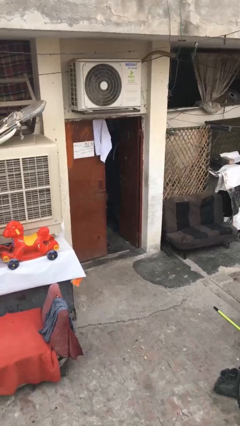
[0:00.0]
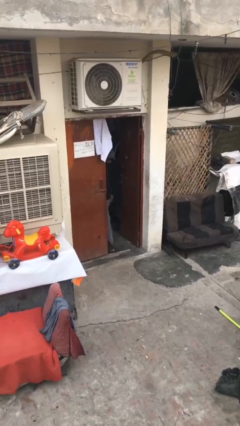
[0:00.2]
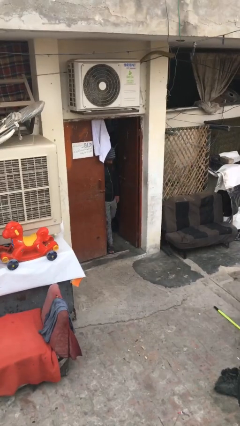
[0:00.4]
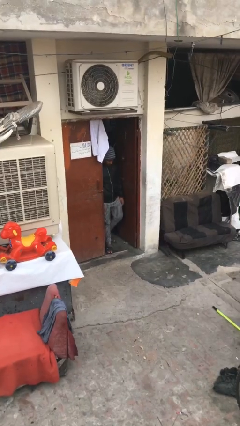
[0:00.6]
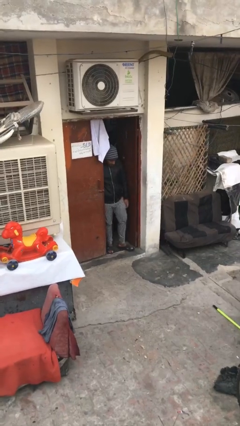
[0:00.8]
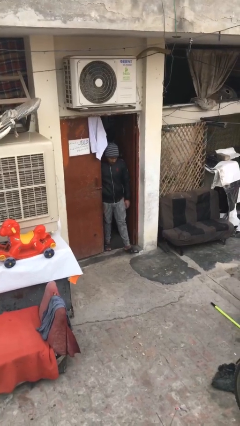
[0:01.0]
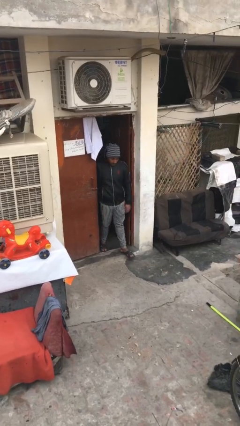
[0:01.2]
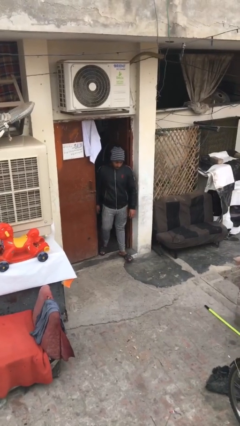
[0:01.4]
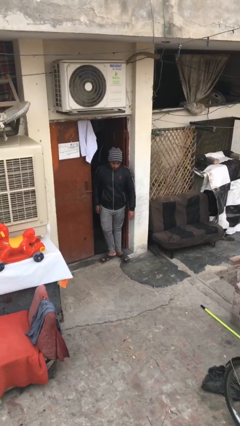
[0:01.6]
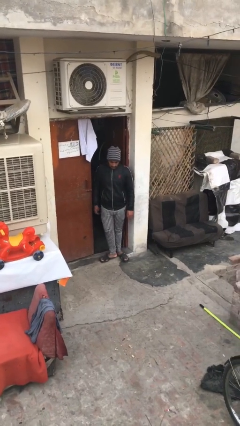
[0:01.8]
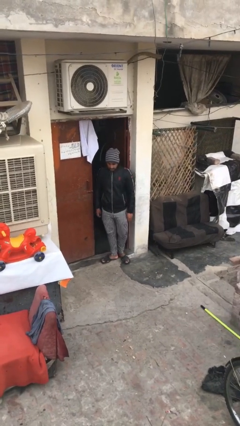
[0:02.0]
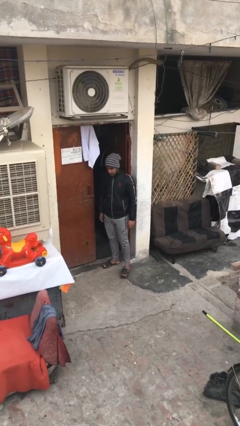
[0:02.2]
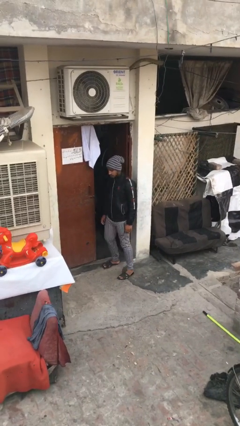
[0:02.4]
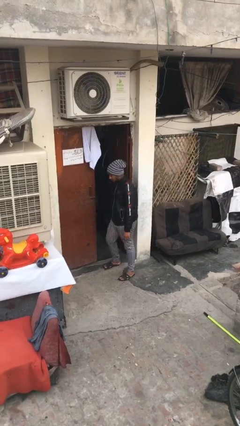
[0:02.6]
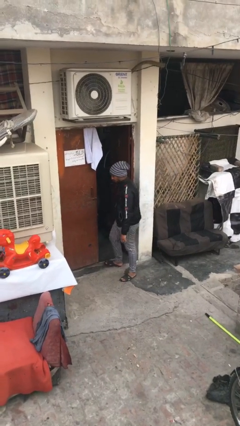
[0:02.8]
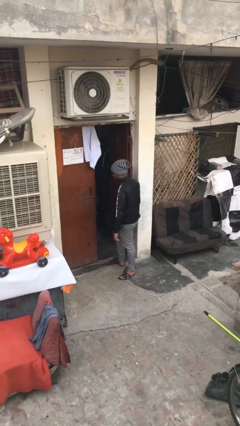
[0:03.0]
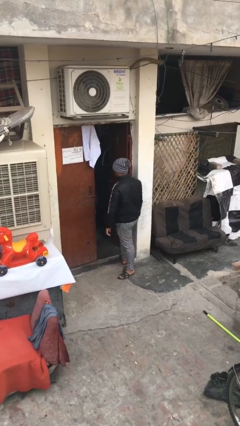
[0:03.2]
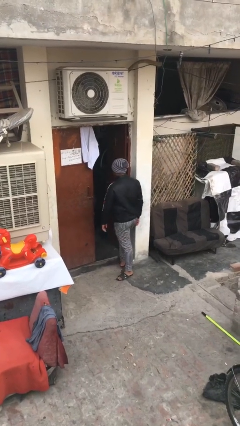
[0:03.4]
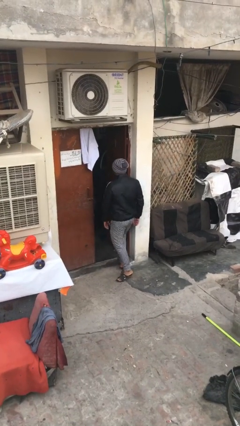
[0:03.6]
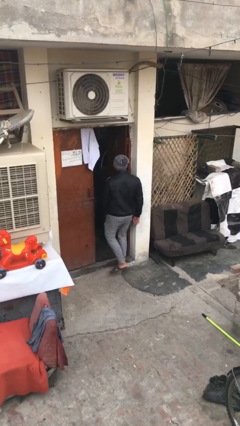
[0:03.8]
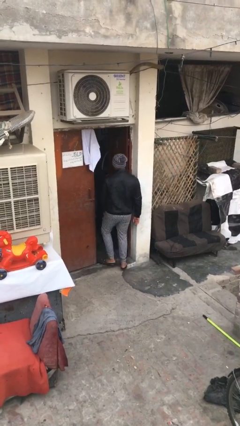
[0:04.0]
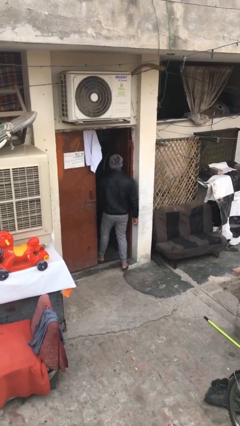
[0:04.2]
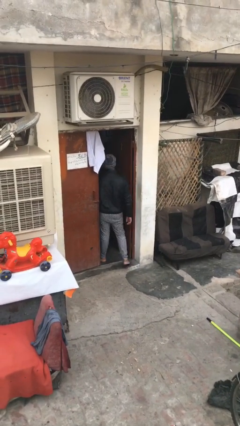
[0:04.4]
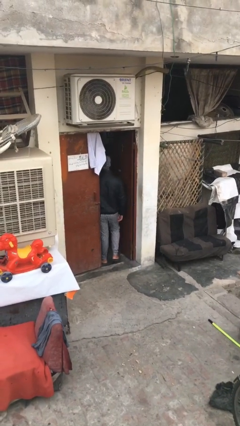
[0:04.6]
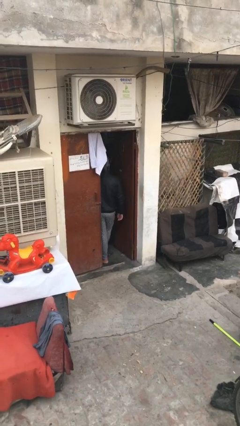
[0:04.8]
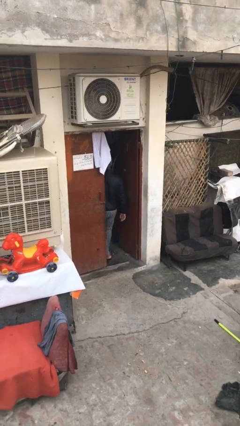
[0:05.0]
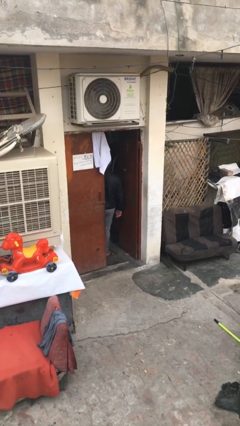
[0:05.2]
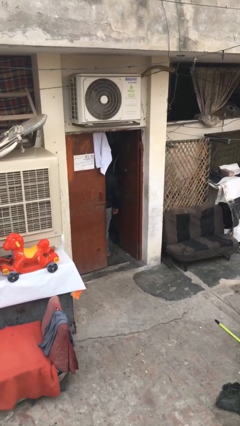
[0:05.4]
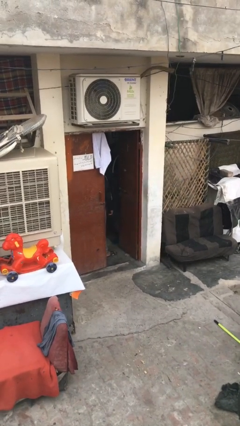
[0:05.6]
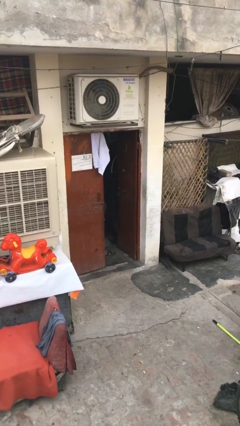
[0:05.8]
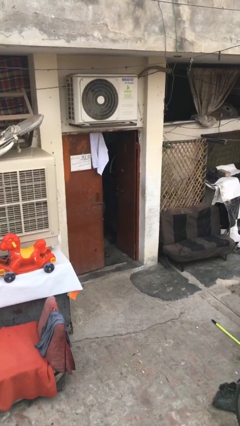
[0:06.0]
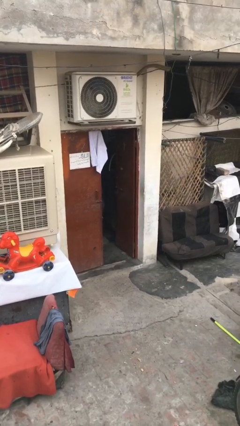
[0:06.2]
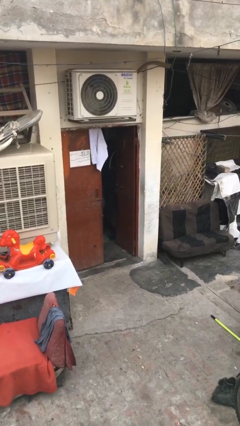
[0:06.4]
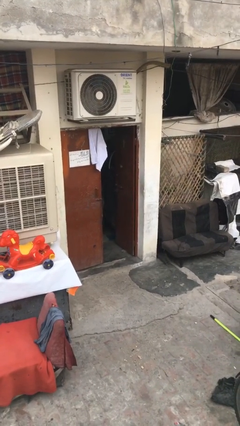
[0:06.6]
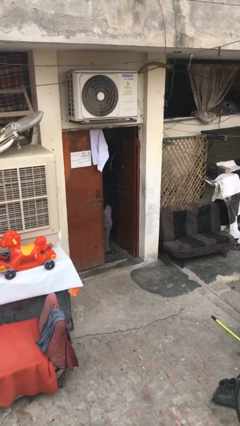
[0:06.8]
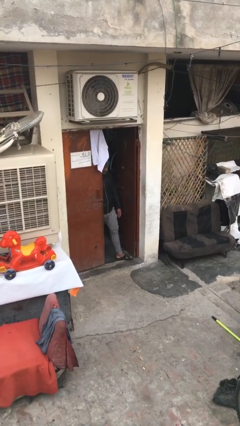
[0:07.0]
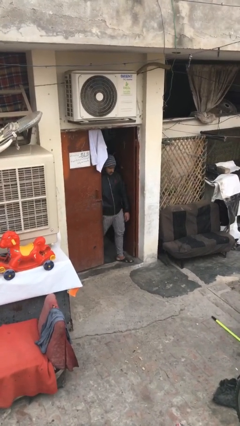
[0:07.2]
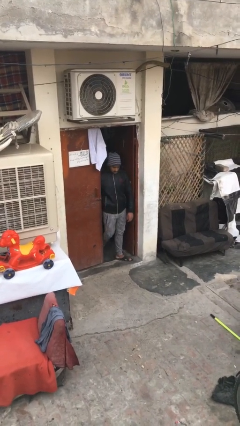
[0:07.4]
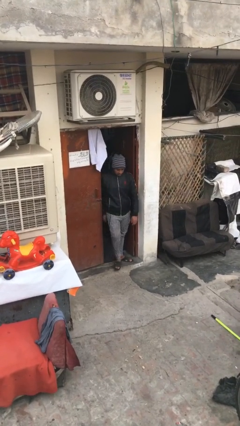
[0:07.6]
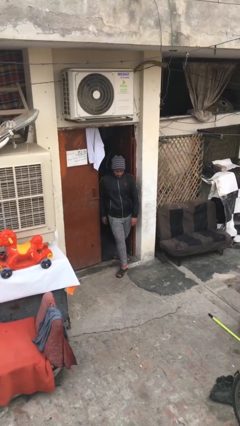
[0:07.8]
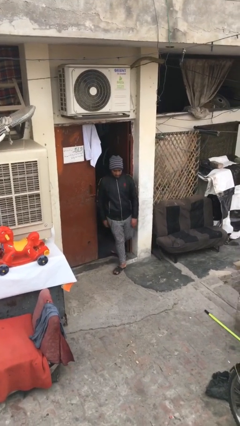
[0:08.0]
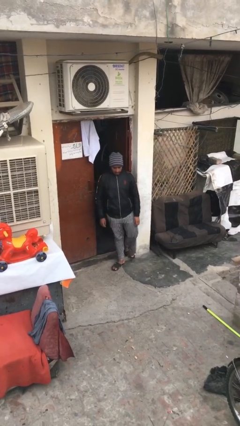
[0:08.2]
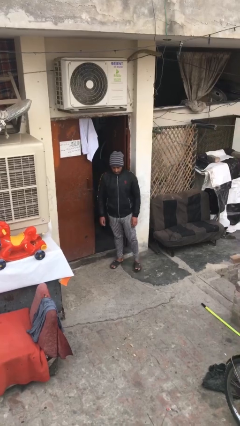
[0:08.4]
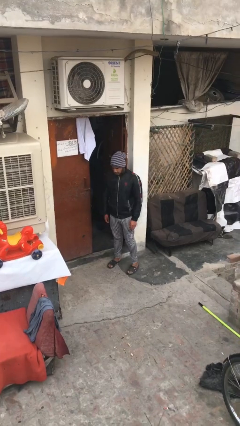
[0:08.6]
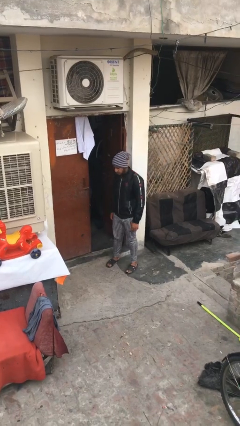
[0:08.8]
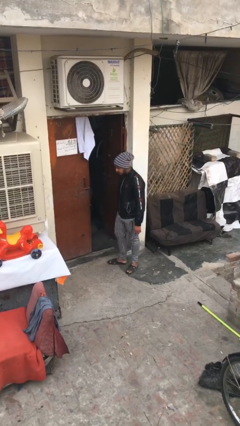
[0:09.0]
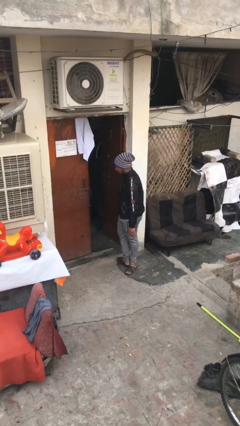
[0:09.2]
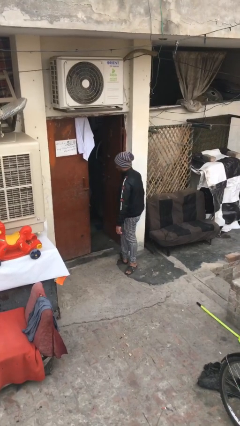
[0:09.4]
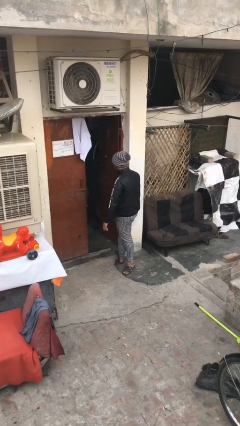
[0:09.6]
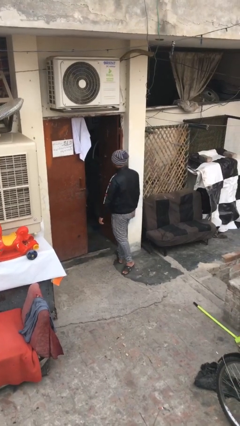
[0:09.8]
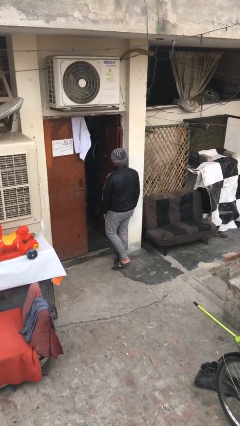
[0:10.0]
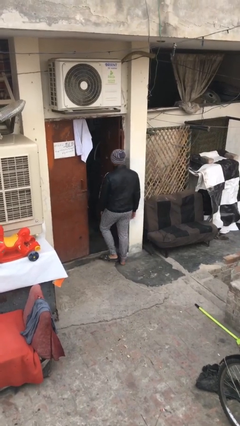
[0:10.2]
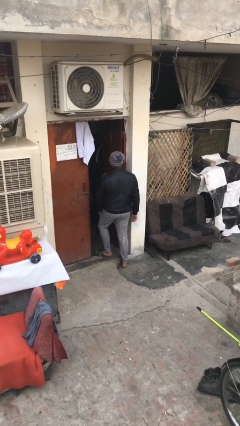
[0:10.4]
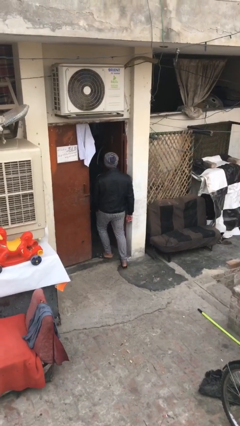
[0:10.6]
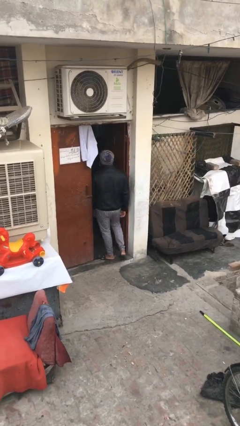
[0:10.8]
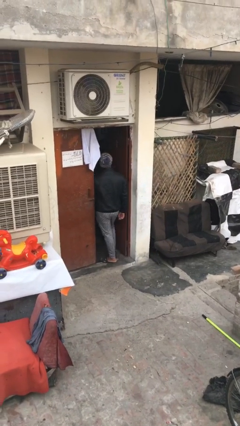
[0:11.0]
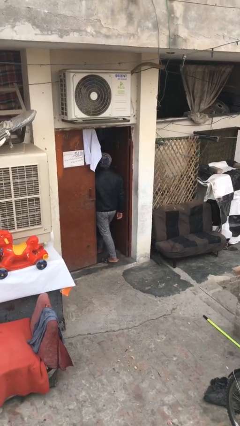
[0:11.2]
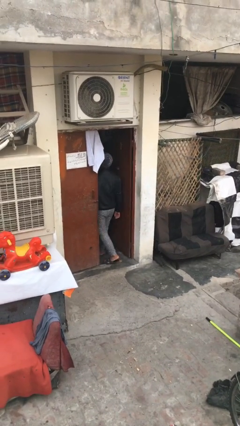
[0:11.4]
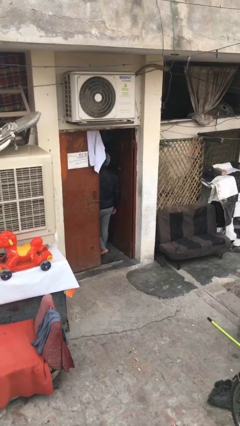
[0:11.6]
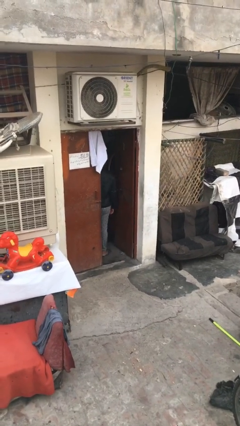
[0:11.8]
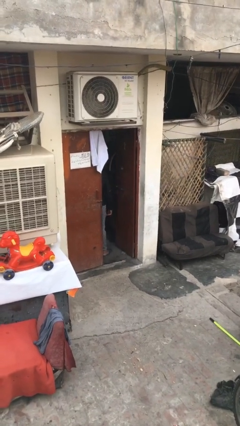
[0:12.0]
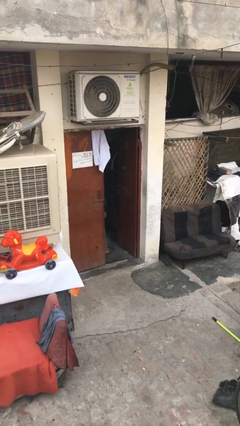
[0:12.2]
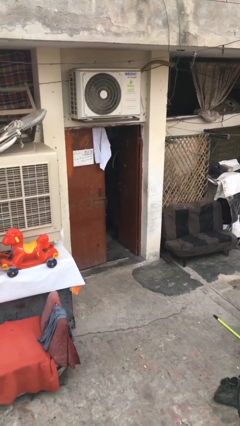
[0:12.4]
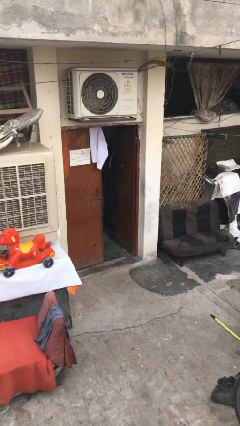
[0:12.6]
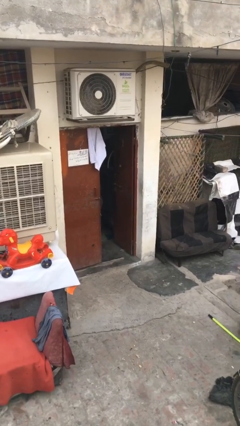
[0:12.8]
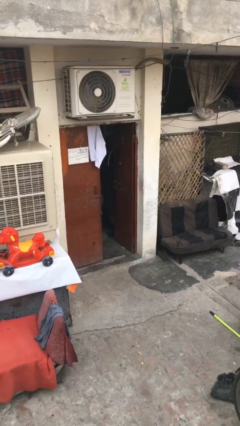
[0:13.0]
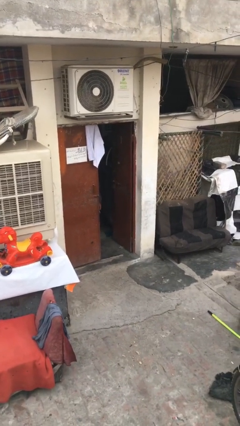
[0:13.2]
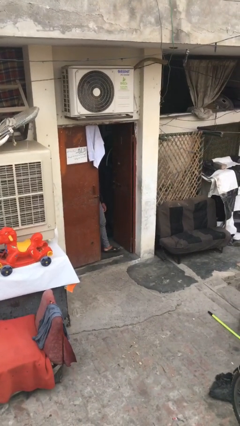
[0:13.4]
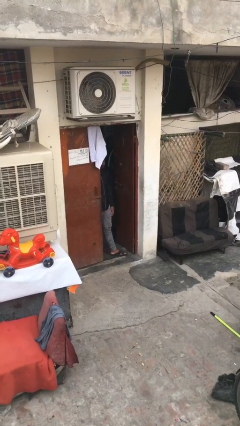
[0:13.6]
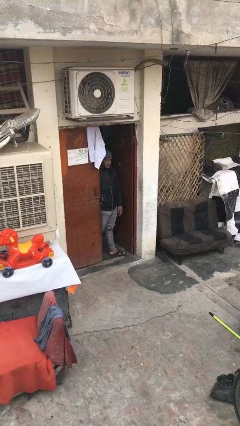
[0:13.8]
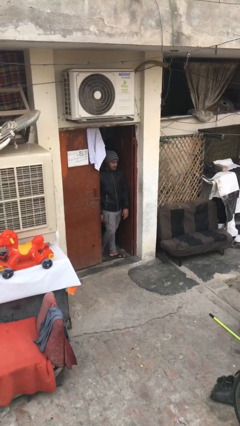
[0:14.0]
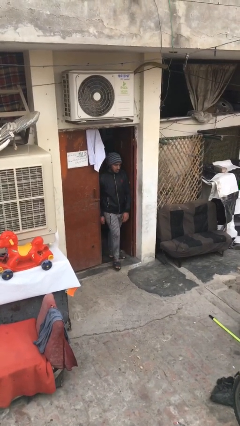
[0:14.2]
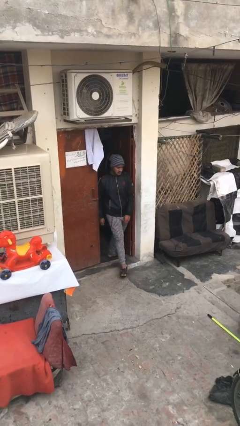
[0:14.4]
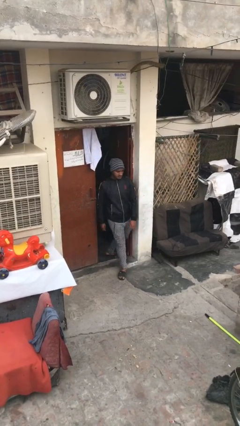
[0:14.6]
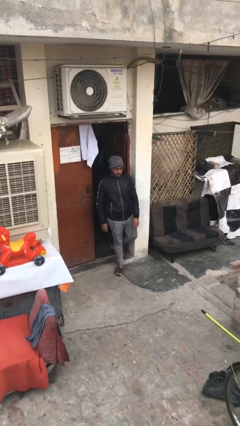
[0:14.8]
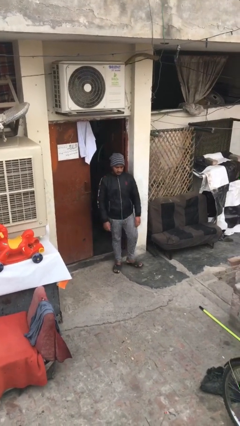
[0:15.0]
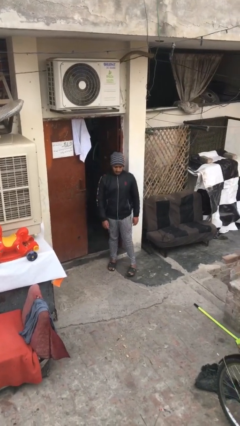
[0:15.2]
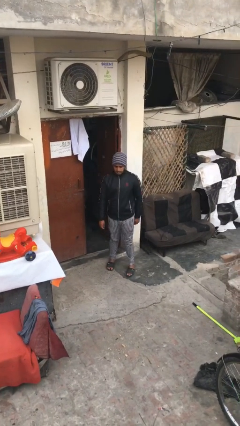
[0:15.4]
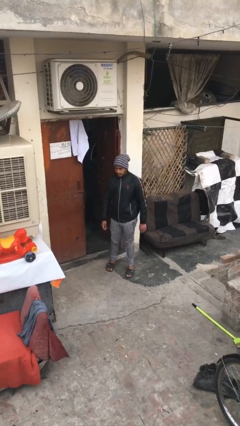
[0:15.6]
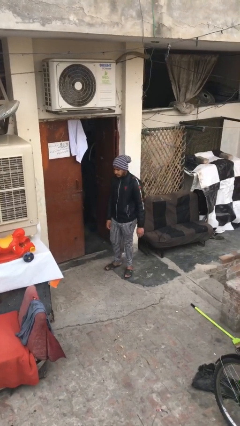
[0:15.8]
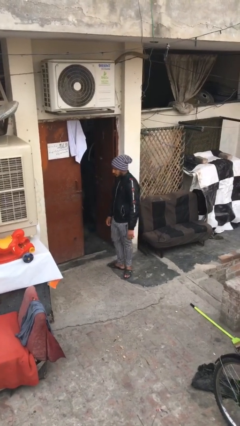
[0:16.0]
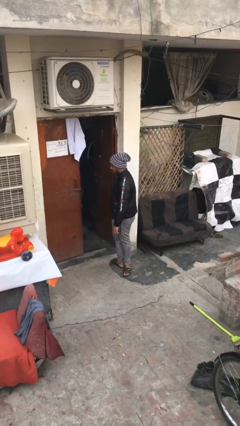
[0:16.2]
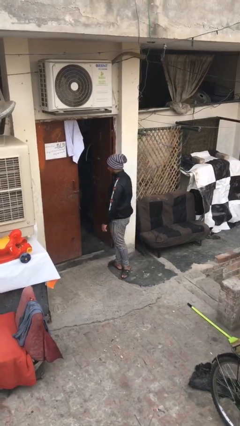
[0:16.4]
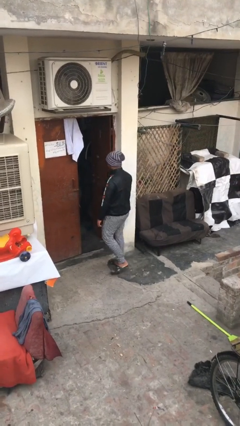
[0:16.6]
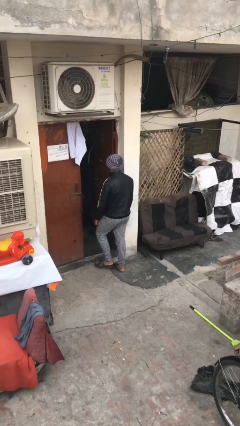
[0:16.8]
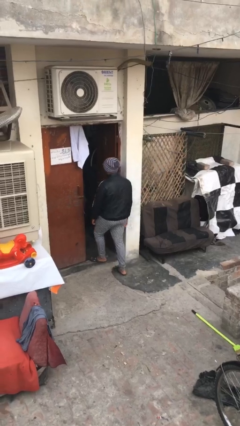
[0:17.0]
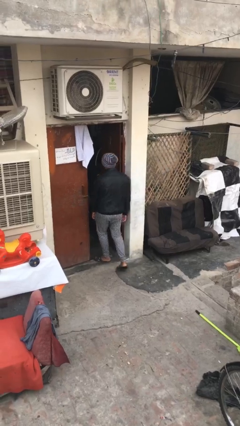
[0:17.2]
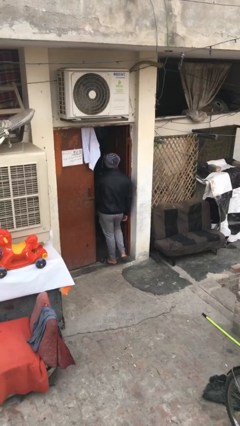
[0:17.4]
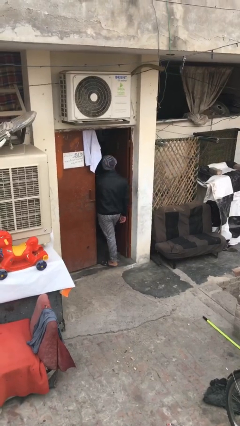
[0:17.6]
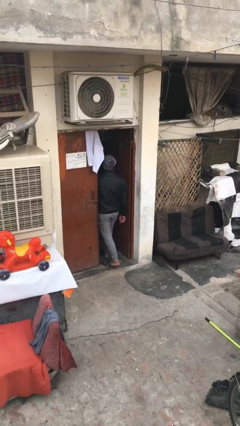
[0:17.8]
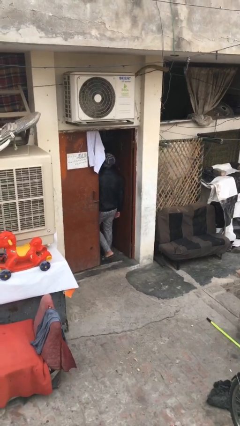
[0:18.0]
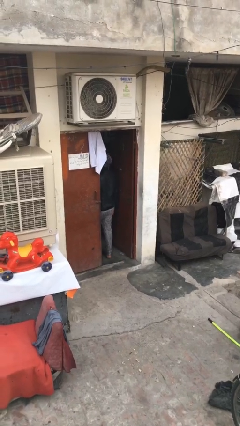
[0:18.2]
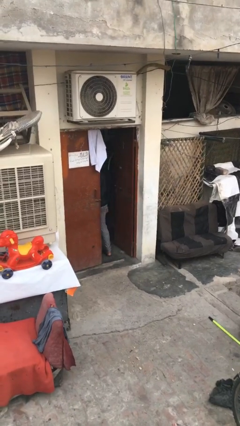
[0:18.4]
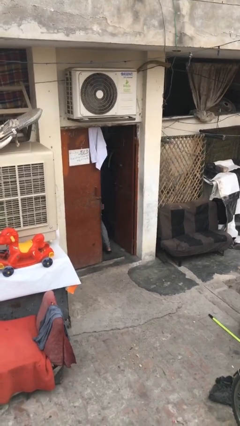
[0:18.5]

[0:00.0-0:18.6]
person texts on phone
